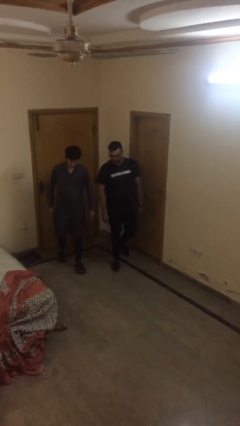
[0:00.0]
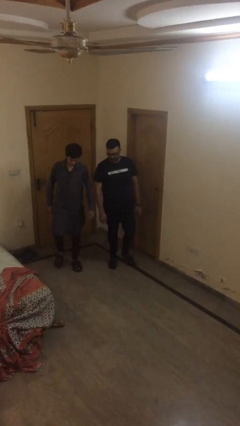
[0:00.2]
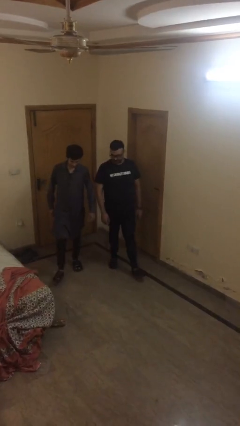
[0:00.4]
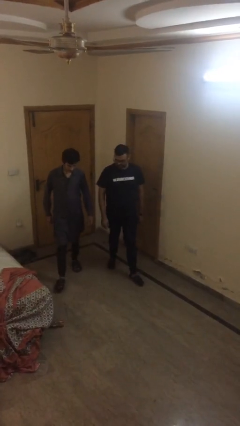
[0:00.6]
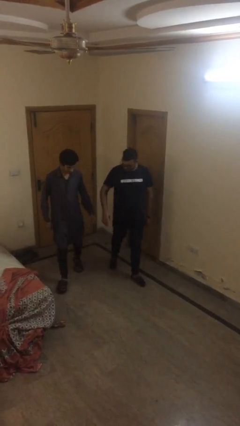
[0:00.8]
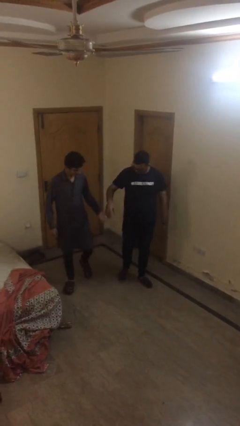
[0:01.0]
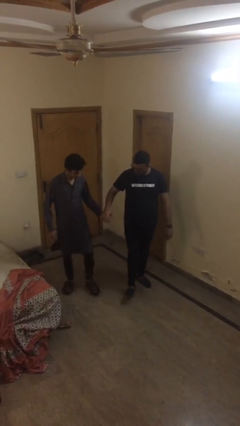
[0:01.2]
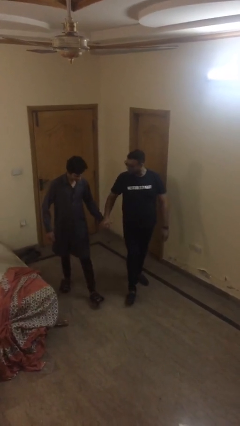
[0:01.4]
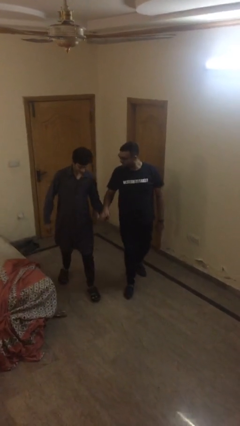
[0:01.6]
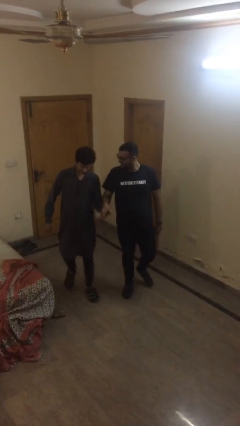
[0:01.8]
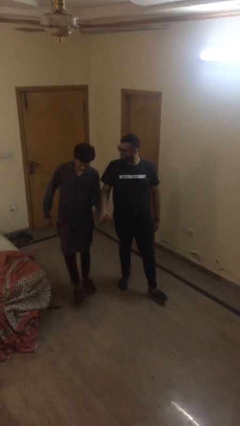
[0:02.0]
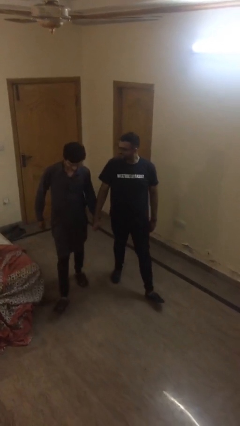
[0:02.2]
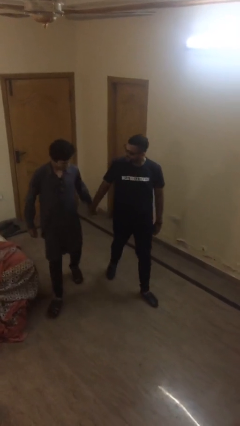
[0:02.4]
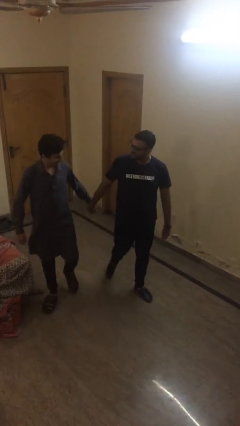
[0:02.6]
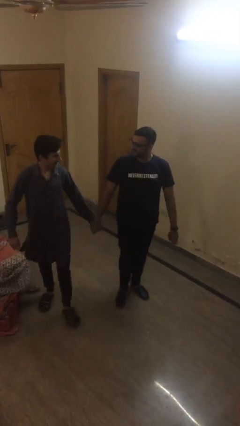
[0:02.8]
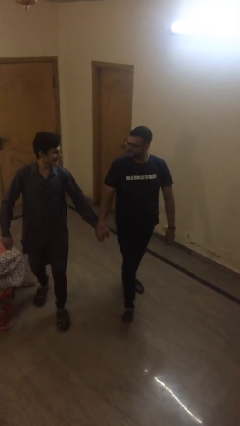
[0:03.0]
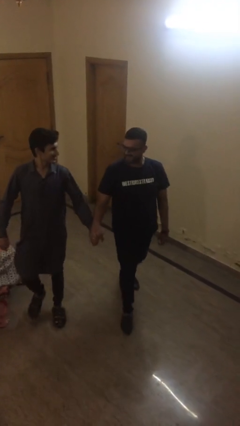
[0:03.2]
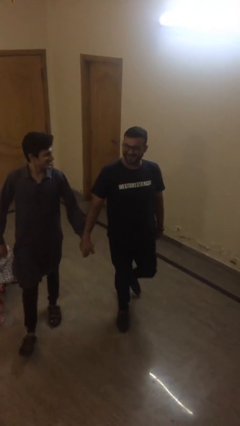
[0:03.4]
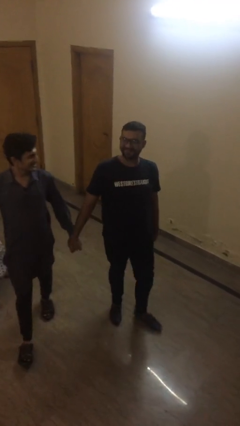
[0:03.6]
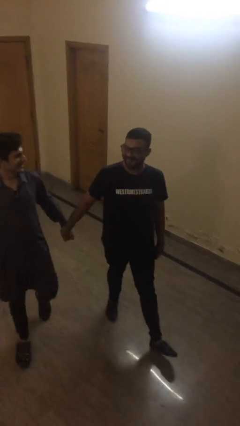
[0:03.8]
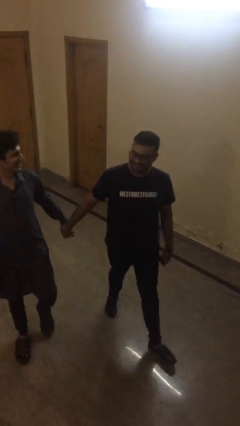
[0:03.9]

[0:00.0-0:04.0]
person holds hand

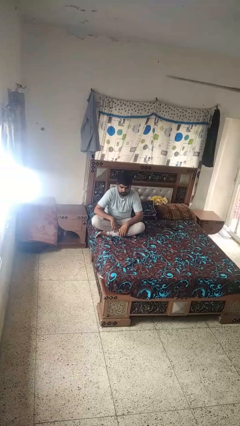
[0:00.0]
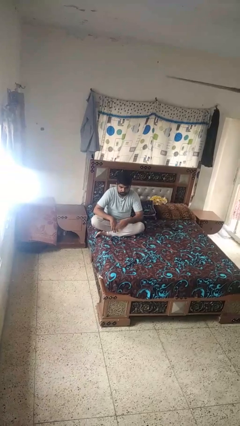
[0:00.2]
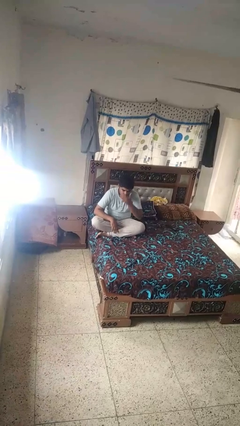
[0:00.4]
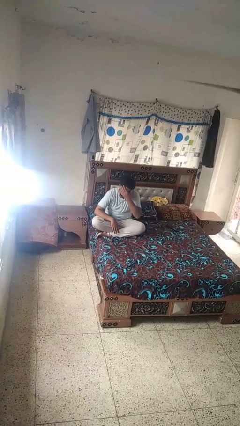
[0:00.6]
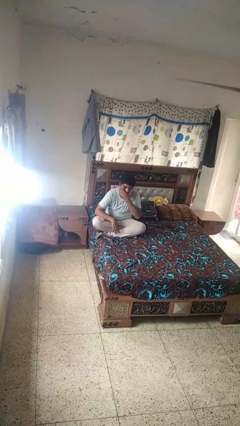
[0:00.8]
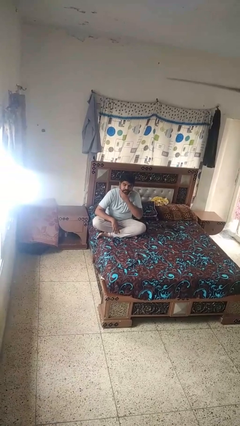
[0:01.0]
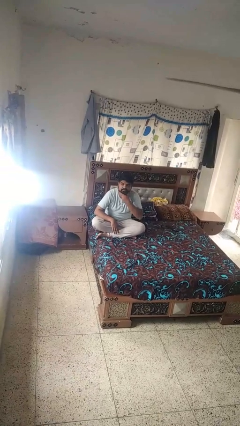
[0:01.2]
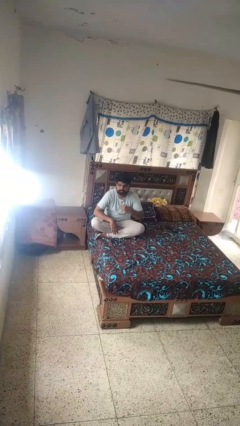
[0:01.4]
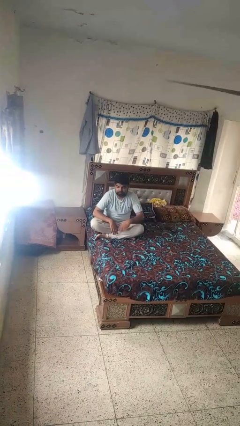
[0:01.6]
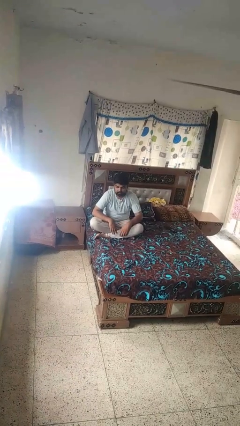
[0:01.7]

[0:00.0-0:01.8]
person scratches face

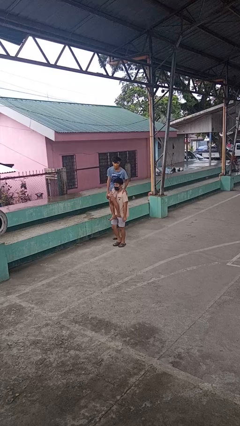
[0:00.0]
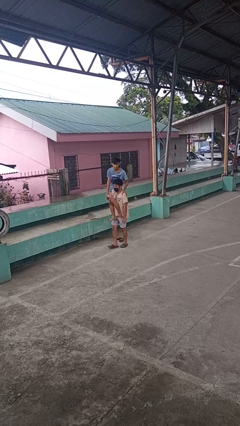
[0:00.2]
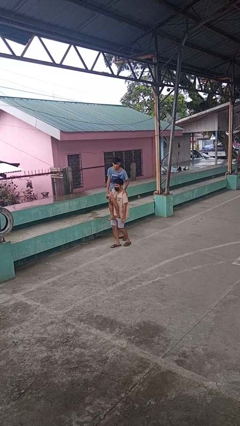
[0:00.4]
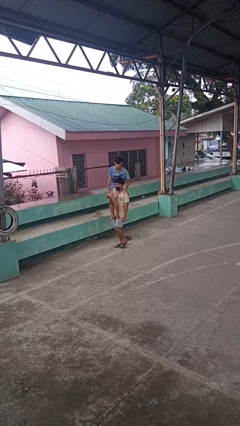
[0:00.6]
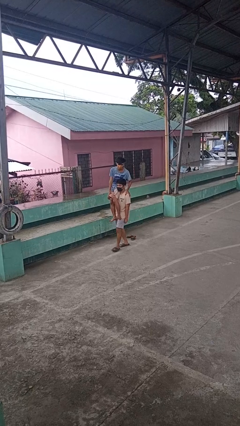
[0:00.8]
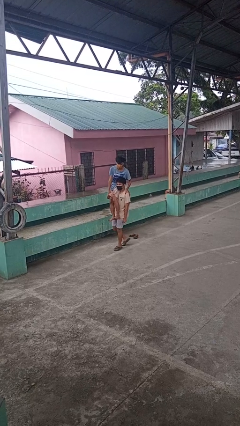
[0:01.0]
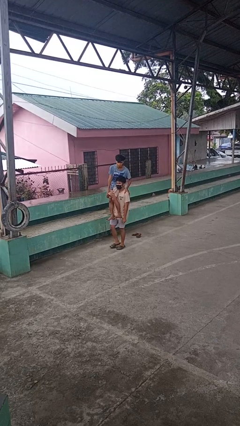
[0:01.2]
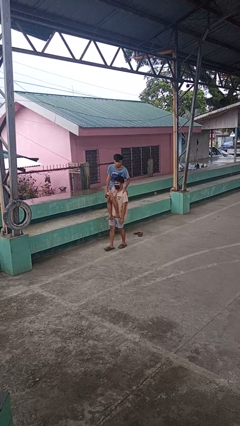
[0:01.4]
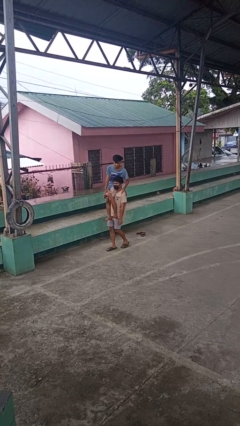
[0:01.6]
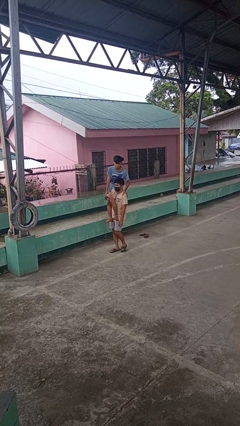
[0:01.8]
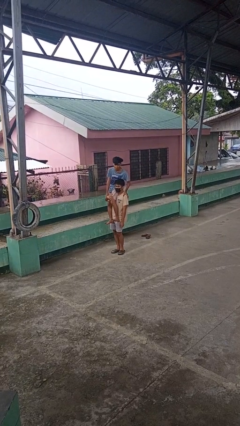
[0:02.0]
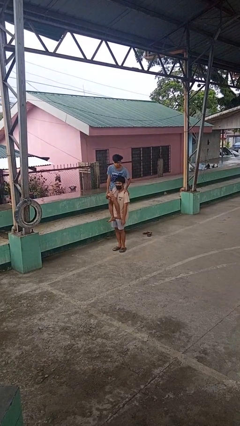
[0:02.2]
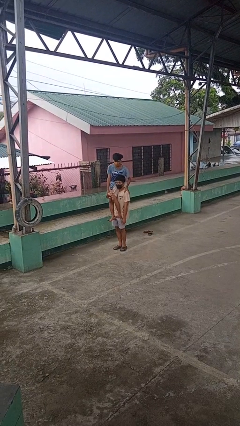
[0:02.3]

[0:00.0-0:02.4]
person carries person on shoulders

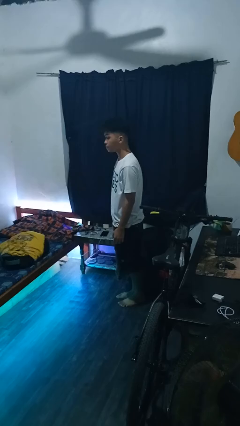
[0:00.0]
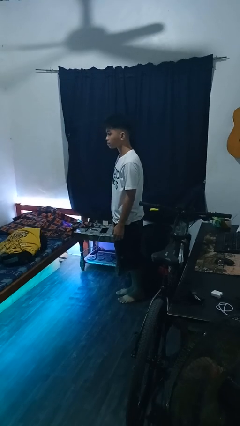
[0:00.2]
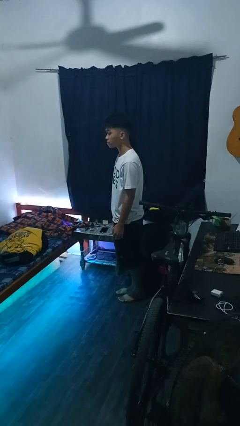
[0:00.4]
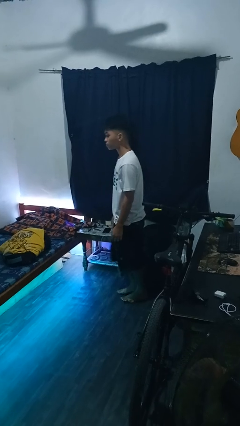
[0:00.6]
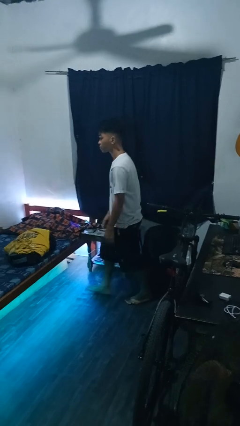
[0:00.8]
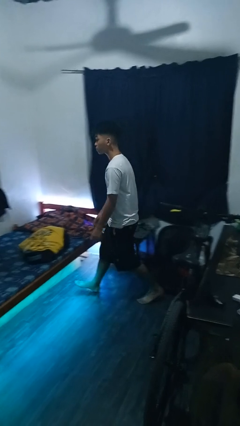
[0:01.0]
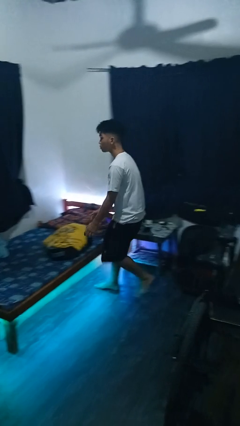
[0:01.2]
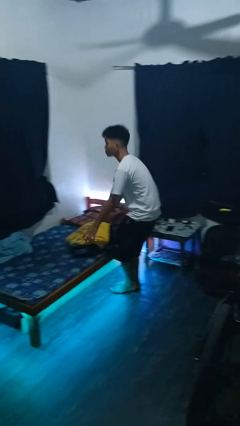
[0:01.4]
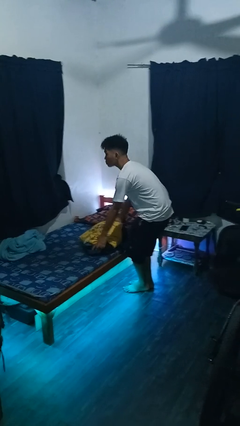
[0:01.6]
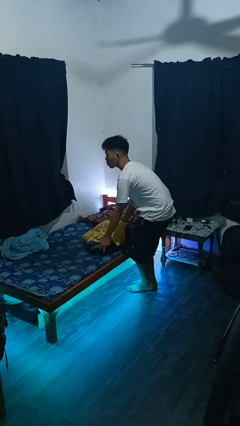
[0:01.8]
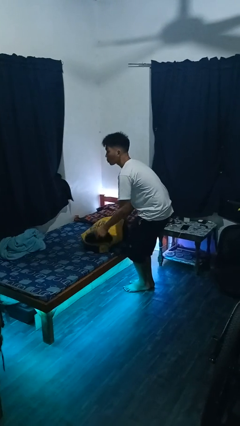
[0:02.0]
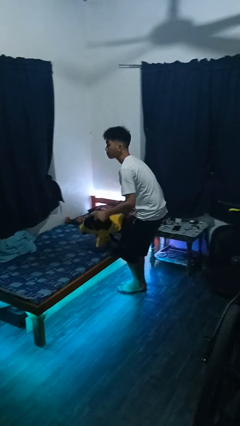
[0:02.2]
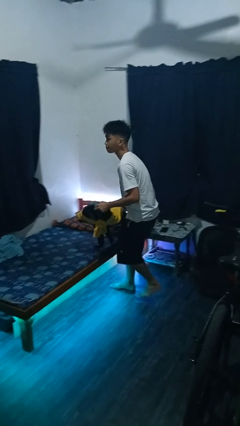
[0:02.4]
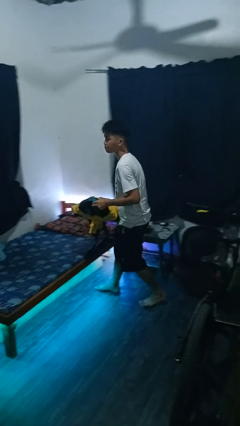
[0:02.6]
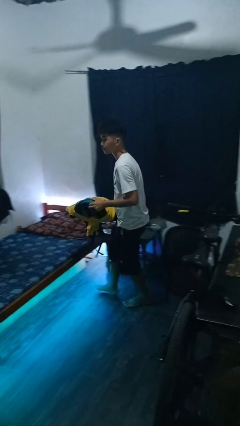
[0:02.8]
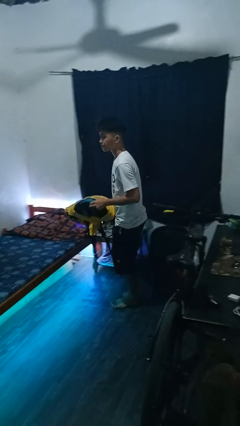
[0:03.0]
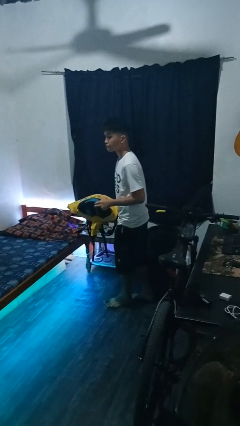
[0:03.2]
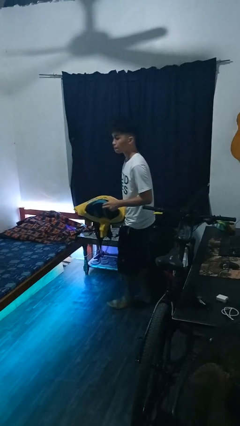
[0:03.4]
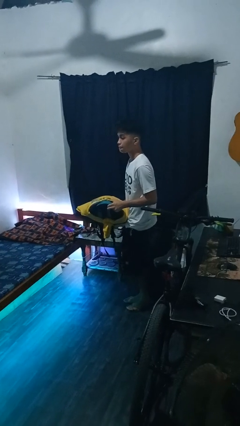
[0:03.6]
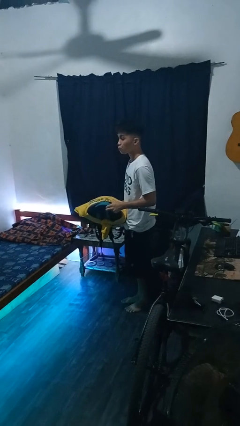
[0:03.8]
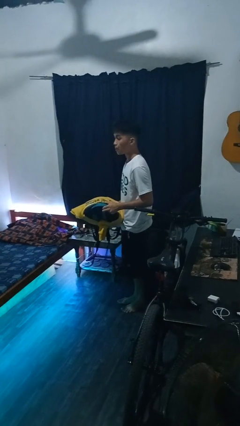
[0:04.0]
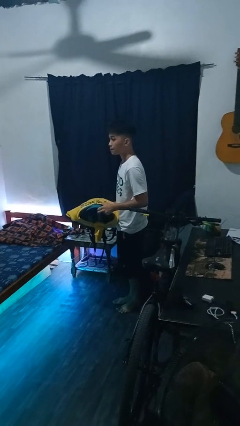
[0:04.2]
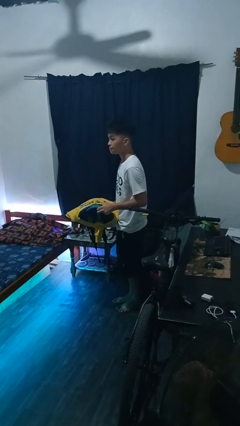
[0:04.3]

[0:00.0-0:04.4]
person picks up object from bed

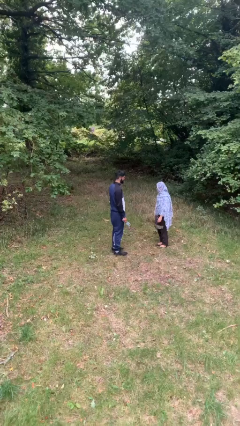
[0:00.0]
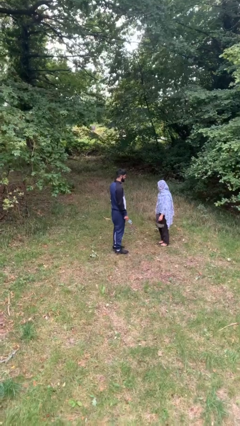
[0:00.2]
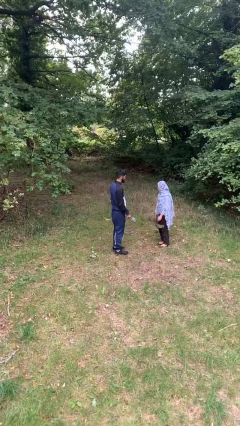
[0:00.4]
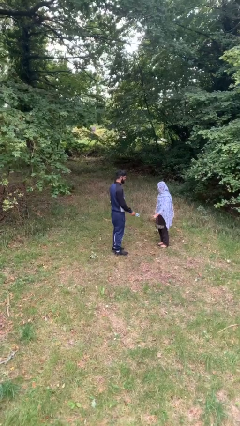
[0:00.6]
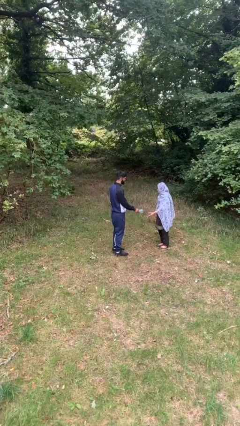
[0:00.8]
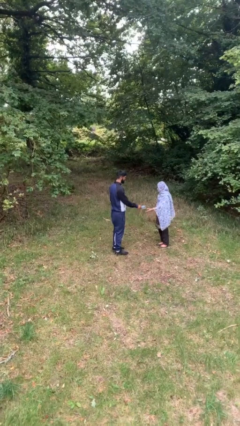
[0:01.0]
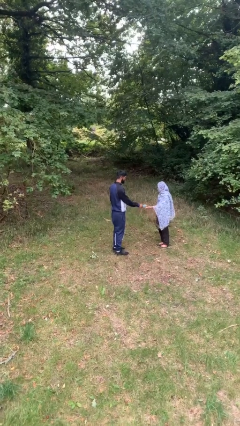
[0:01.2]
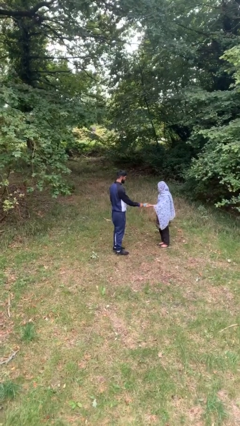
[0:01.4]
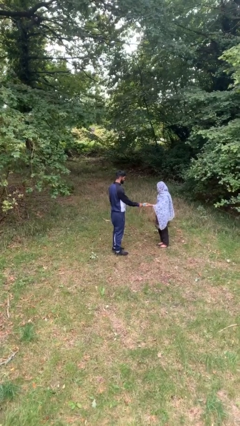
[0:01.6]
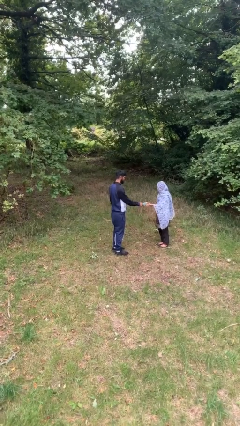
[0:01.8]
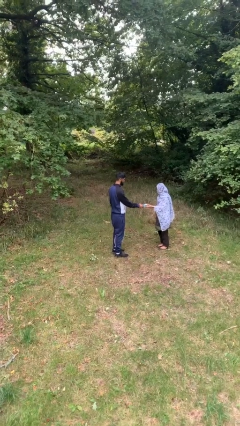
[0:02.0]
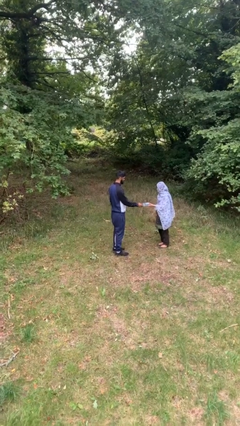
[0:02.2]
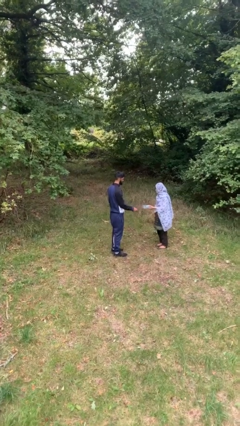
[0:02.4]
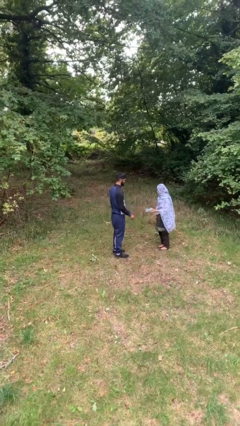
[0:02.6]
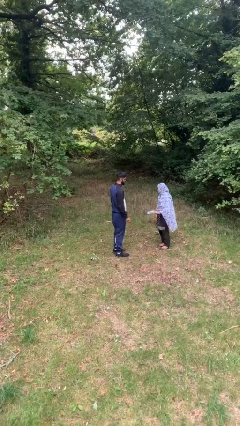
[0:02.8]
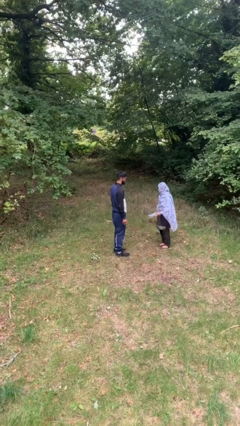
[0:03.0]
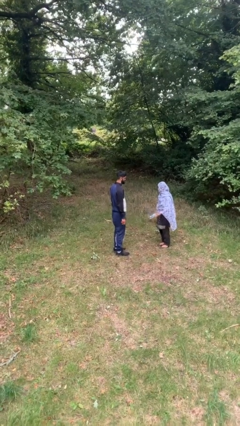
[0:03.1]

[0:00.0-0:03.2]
person transfers object to person

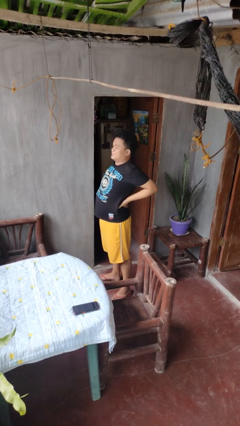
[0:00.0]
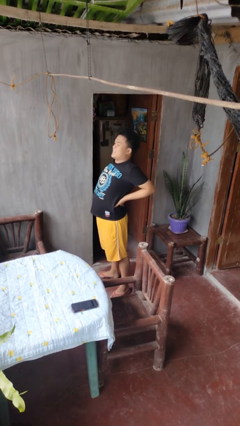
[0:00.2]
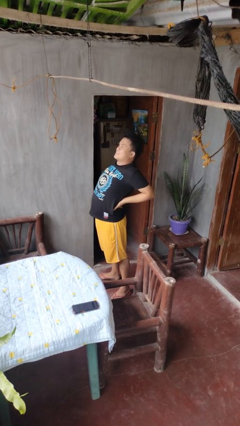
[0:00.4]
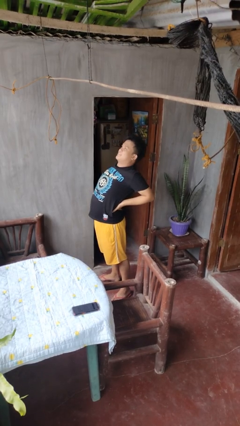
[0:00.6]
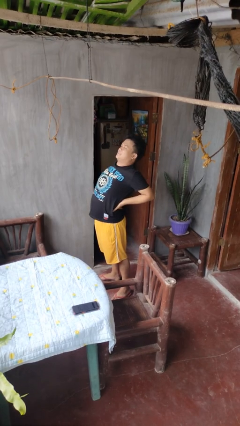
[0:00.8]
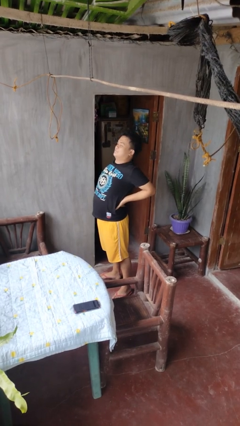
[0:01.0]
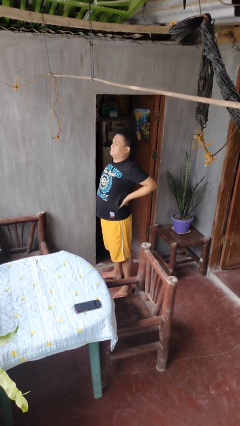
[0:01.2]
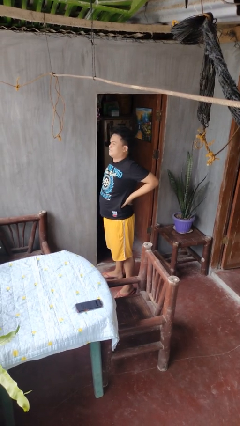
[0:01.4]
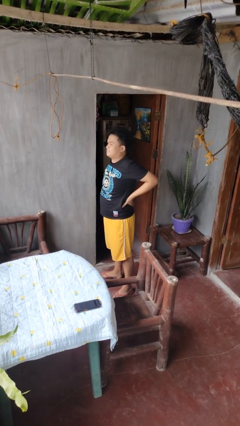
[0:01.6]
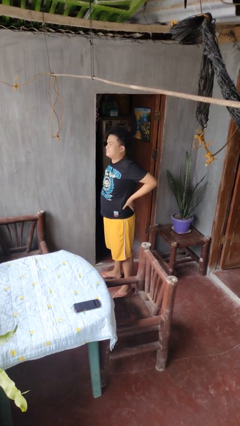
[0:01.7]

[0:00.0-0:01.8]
person stretches back
